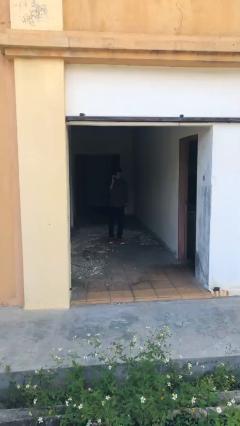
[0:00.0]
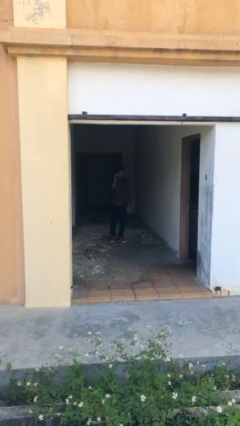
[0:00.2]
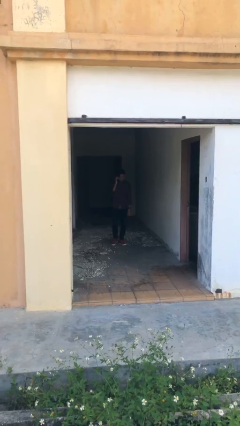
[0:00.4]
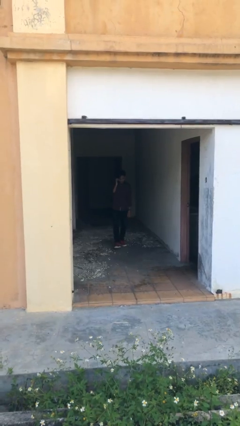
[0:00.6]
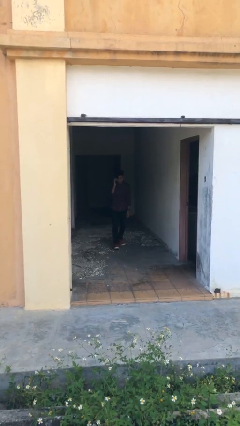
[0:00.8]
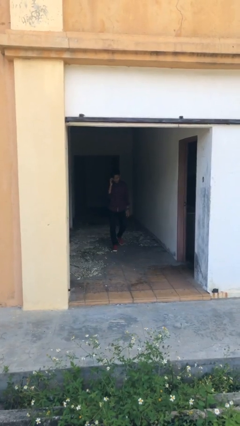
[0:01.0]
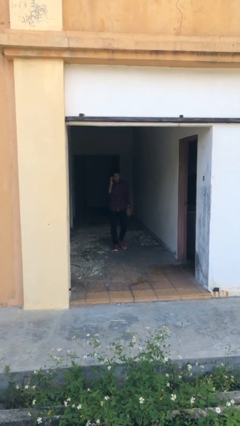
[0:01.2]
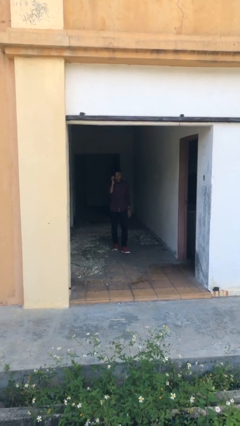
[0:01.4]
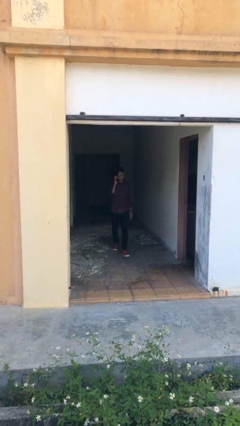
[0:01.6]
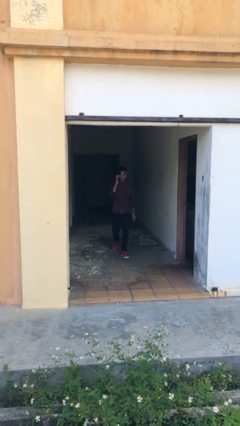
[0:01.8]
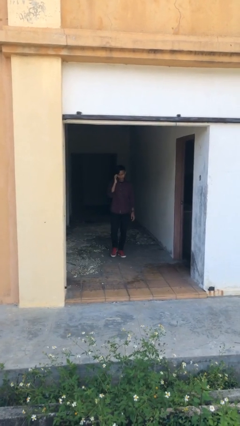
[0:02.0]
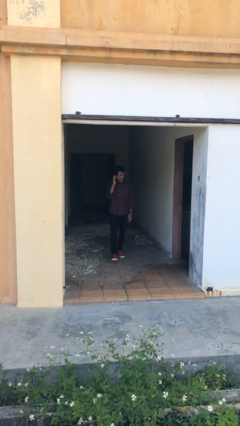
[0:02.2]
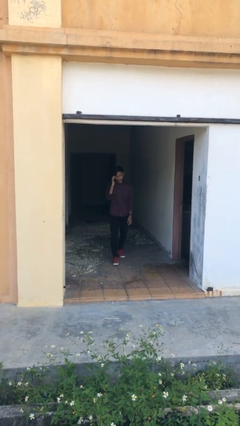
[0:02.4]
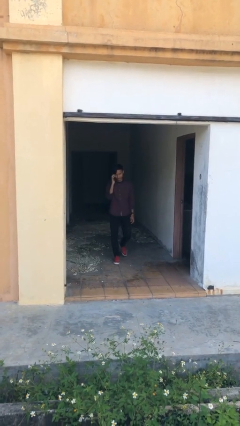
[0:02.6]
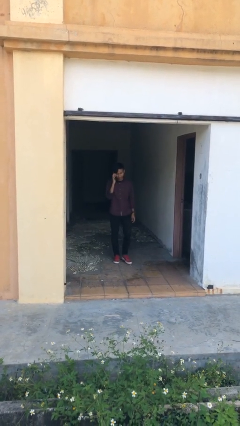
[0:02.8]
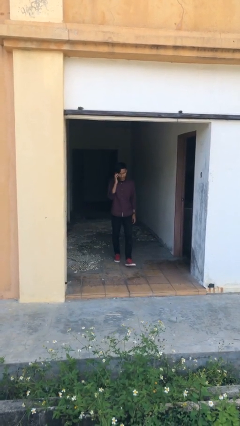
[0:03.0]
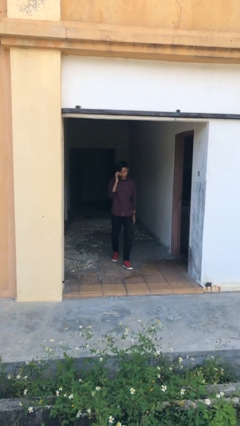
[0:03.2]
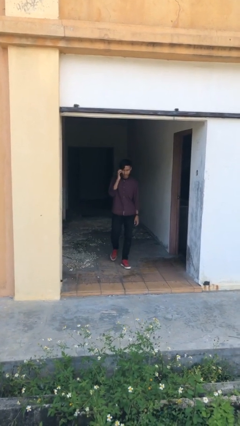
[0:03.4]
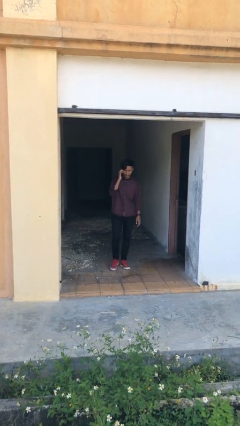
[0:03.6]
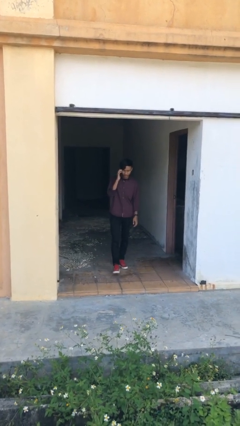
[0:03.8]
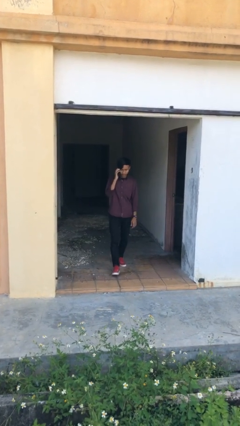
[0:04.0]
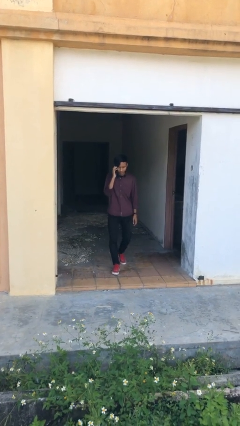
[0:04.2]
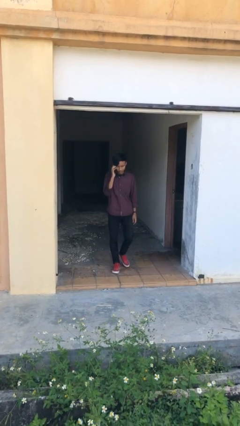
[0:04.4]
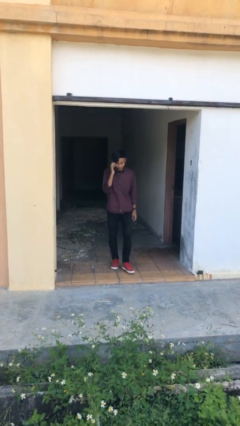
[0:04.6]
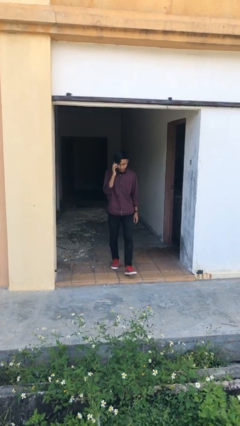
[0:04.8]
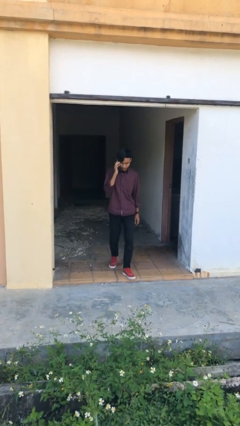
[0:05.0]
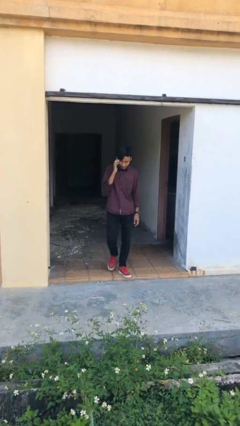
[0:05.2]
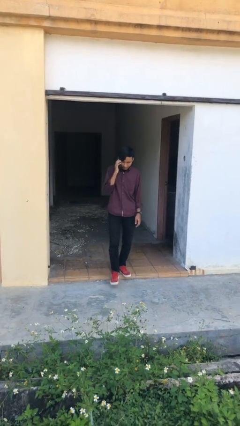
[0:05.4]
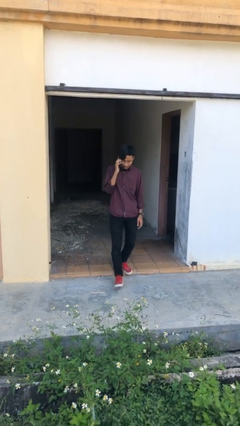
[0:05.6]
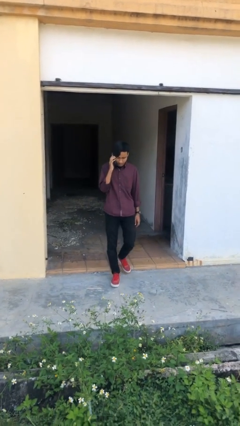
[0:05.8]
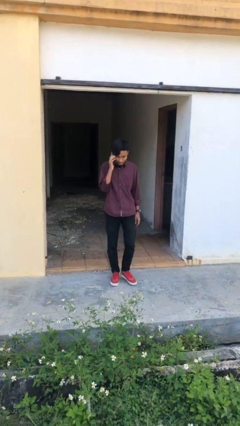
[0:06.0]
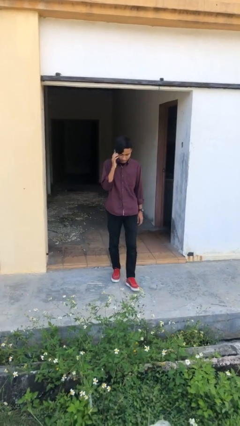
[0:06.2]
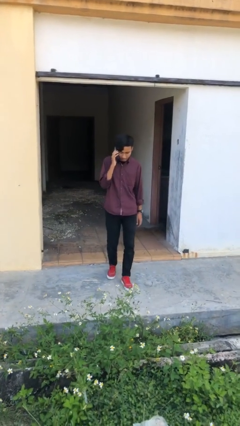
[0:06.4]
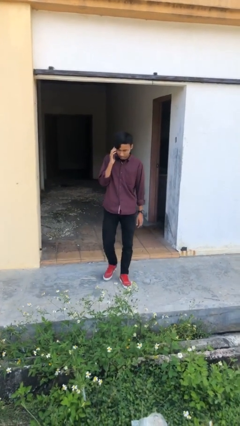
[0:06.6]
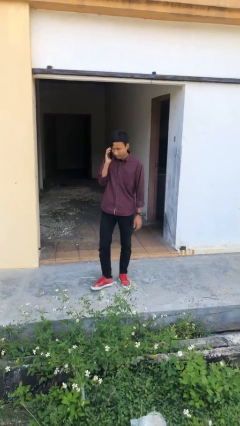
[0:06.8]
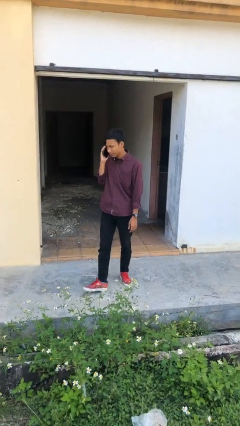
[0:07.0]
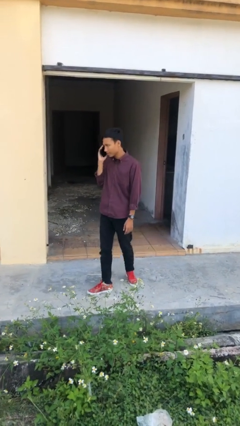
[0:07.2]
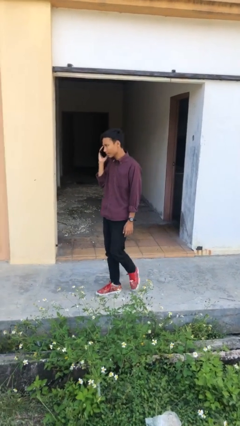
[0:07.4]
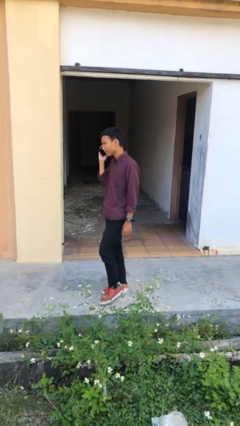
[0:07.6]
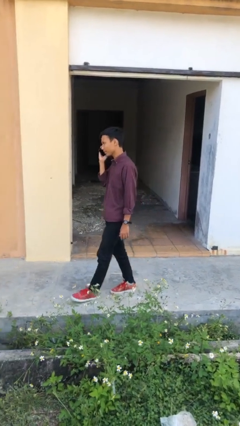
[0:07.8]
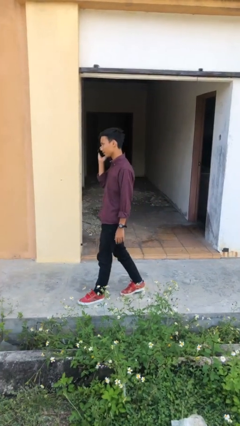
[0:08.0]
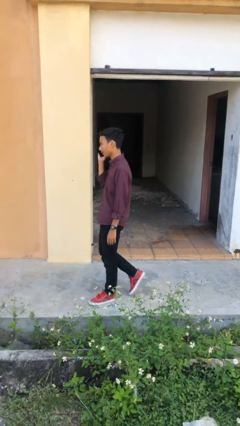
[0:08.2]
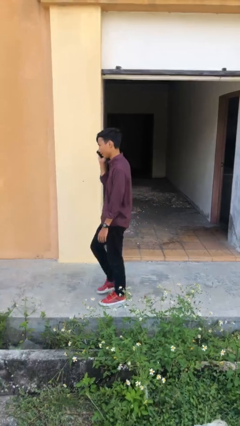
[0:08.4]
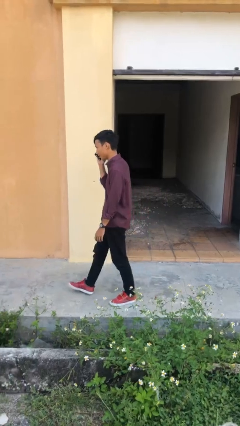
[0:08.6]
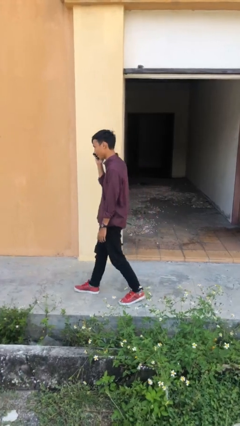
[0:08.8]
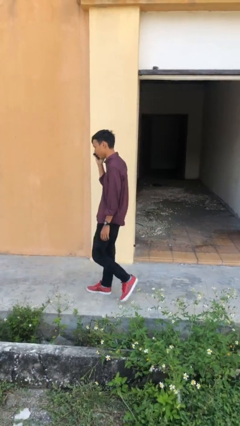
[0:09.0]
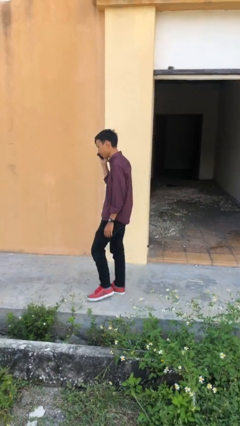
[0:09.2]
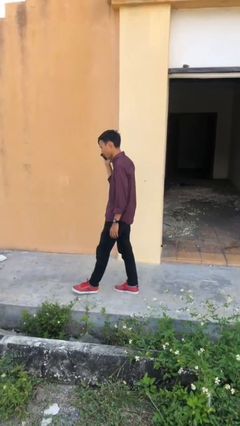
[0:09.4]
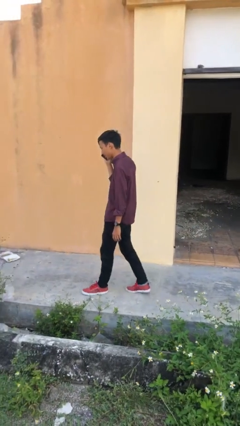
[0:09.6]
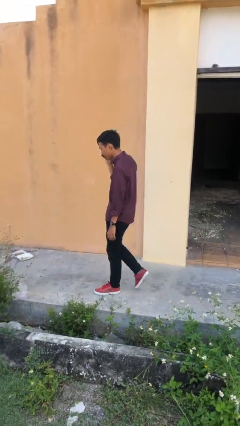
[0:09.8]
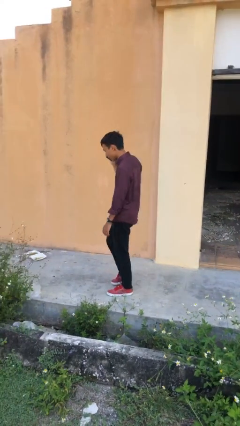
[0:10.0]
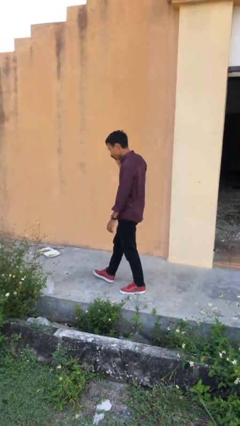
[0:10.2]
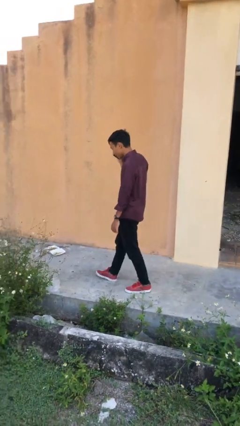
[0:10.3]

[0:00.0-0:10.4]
person enters scene through structure

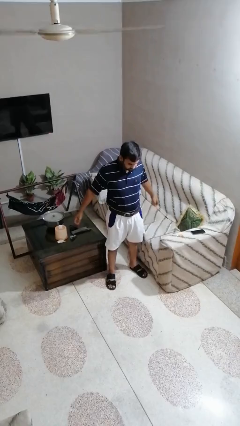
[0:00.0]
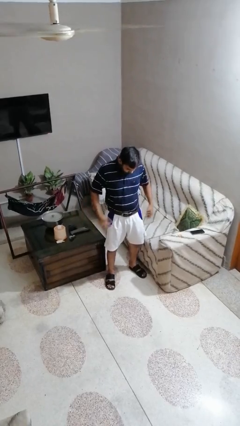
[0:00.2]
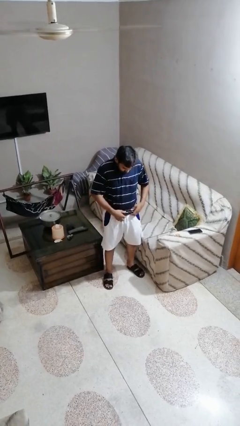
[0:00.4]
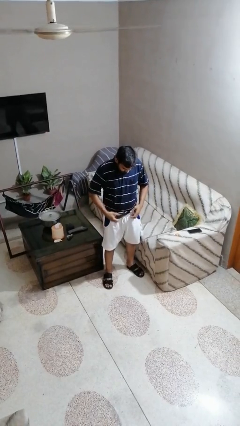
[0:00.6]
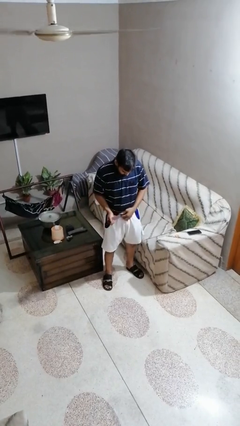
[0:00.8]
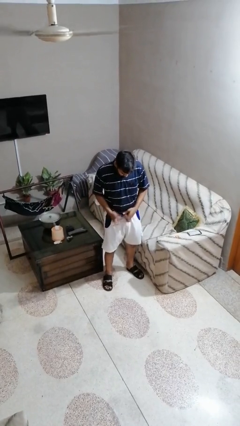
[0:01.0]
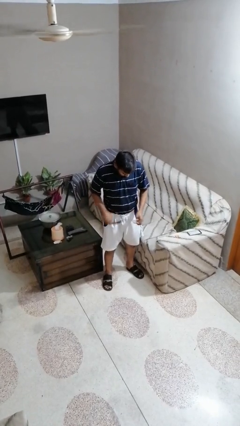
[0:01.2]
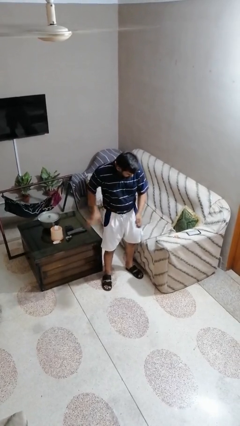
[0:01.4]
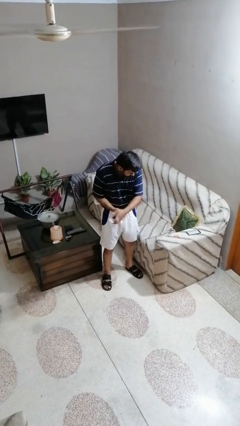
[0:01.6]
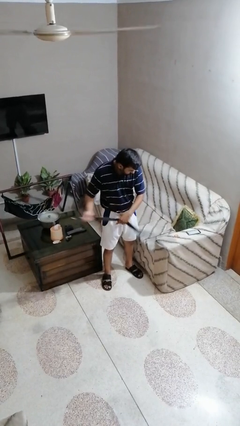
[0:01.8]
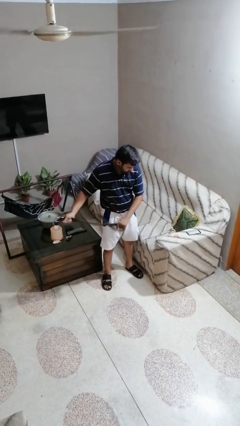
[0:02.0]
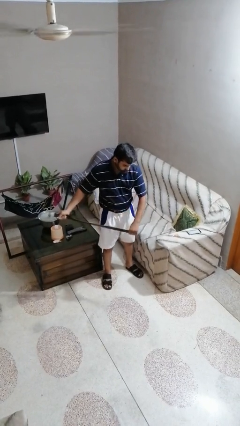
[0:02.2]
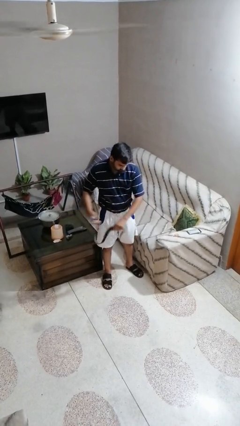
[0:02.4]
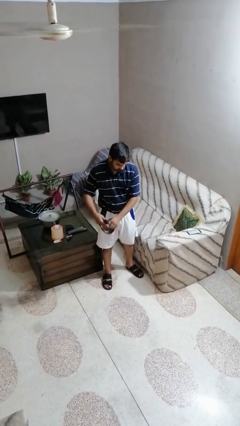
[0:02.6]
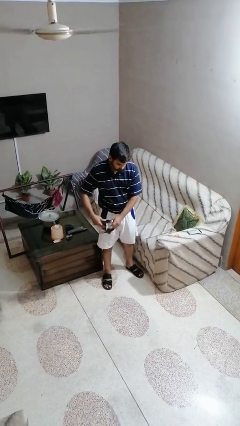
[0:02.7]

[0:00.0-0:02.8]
person takes off belt

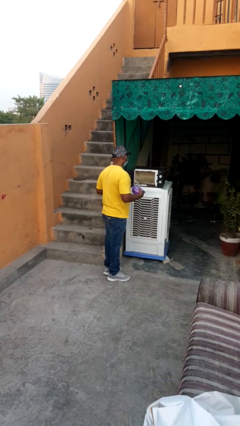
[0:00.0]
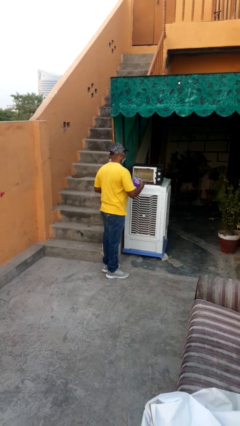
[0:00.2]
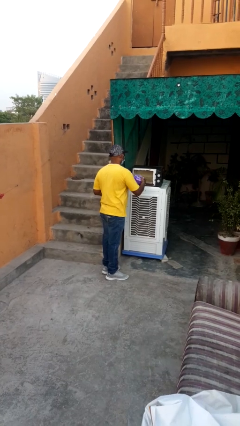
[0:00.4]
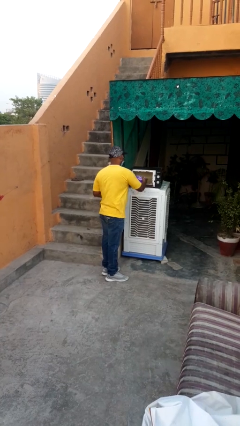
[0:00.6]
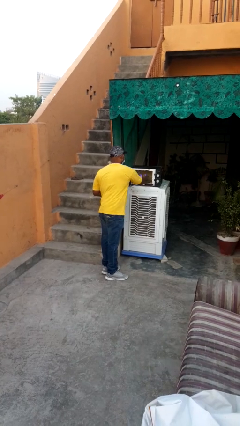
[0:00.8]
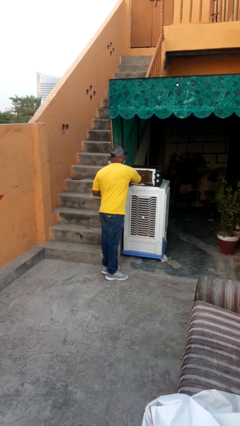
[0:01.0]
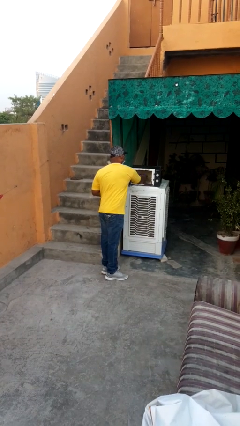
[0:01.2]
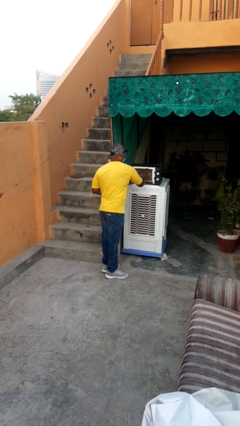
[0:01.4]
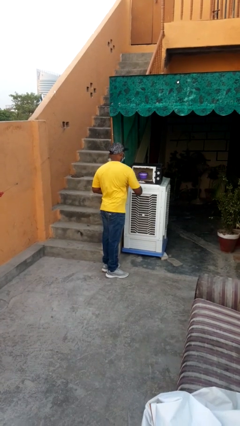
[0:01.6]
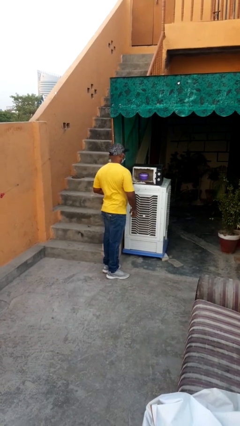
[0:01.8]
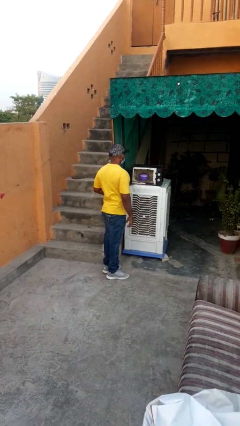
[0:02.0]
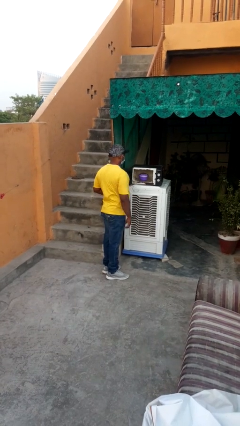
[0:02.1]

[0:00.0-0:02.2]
person puts object into microwave

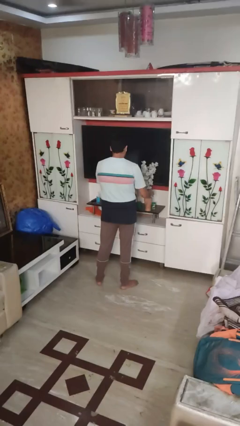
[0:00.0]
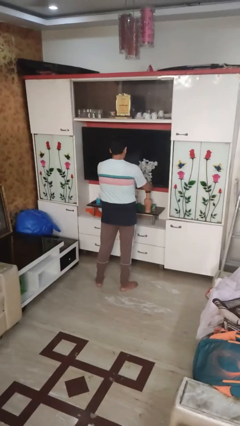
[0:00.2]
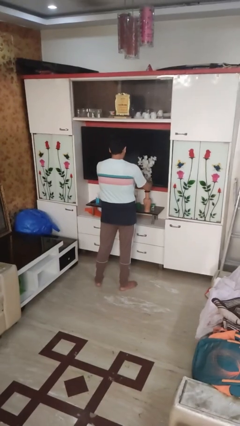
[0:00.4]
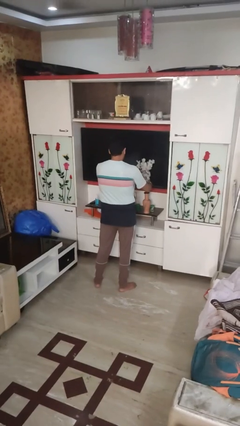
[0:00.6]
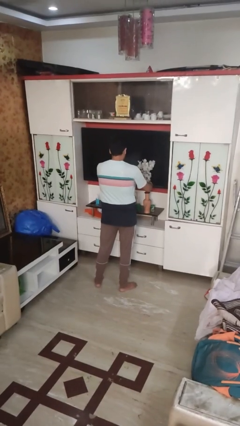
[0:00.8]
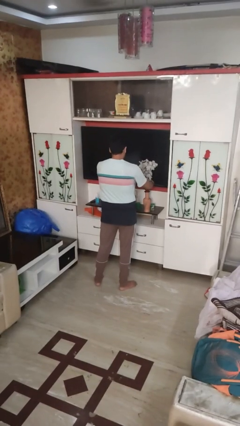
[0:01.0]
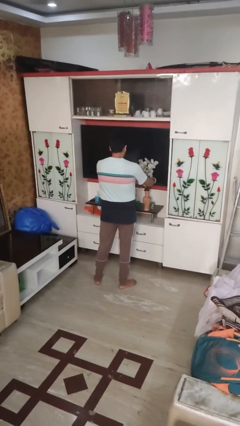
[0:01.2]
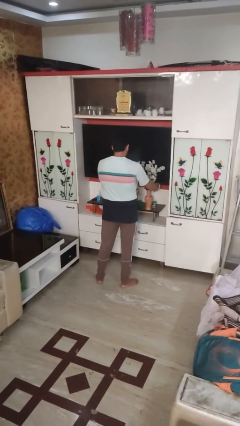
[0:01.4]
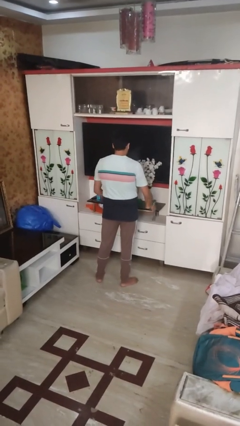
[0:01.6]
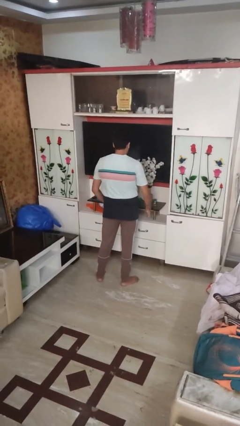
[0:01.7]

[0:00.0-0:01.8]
person arranges flowers in vase
